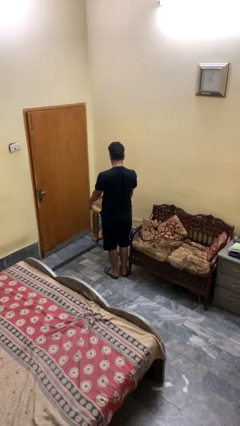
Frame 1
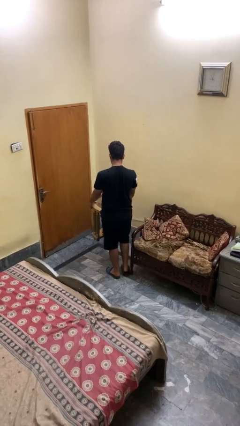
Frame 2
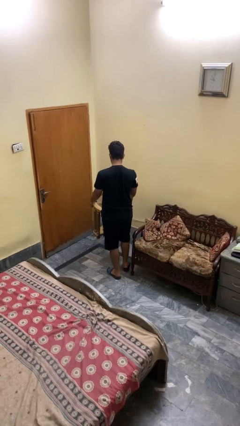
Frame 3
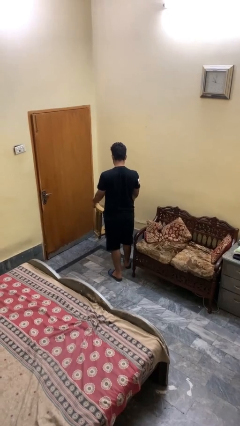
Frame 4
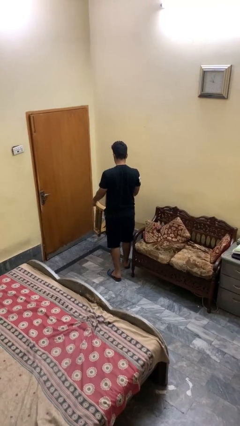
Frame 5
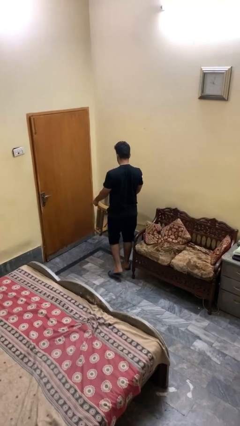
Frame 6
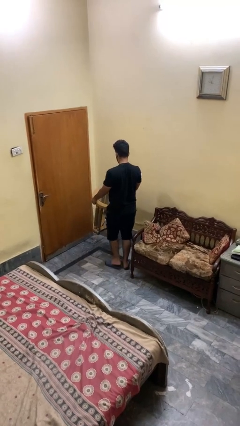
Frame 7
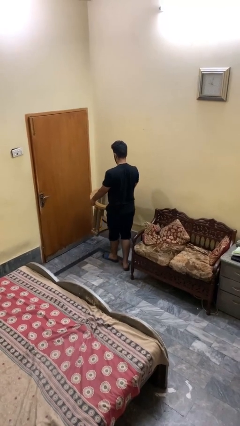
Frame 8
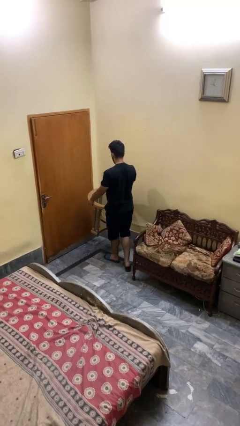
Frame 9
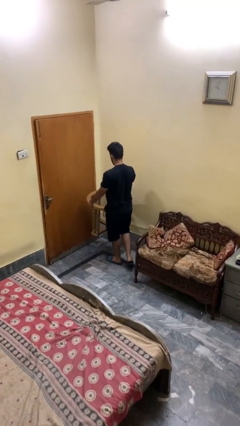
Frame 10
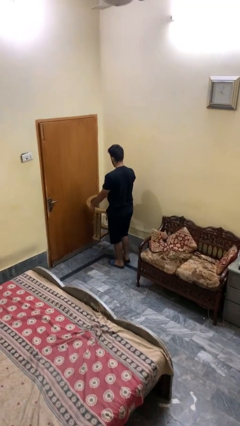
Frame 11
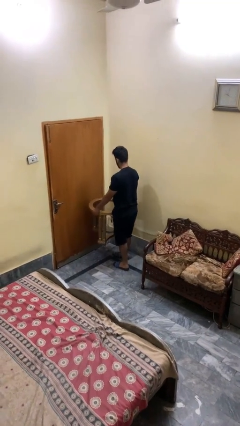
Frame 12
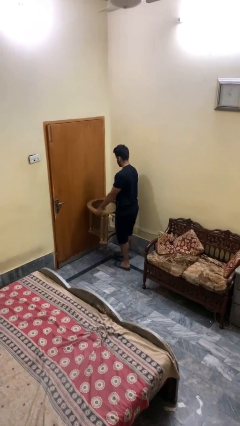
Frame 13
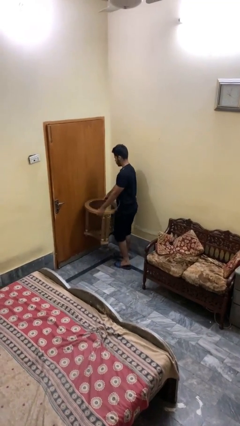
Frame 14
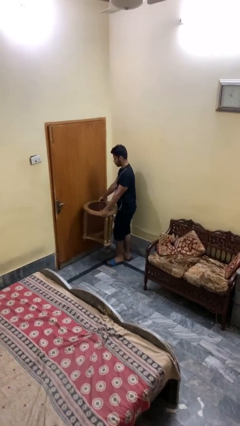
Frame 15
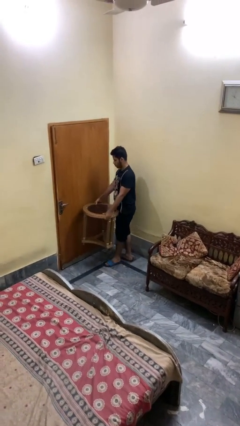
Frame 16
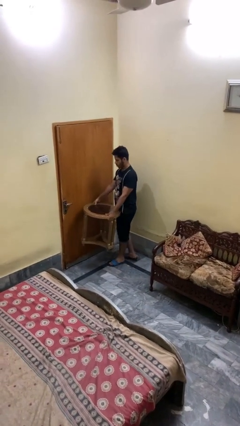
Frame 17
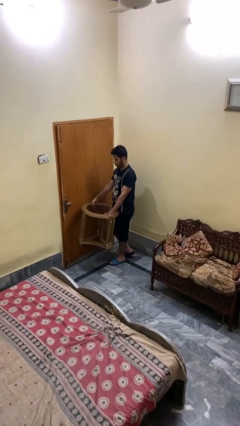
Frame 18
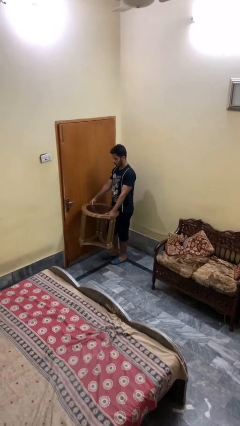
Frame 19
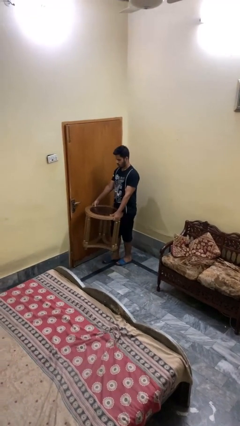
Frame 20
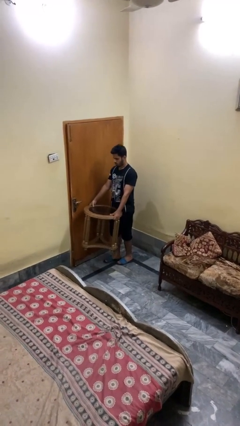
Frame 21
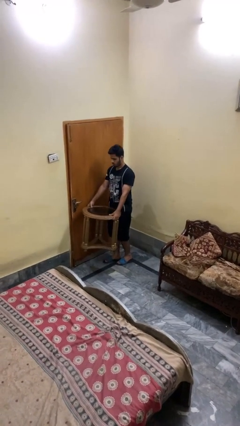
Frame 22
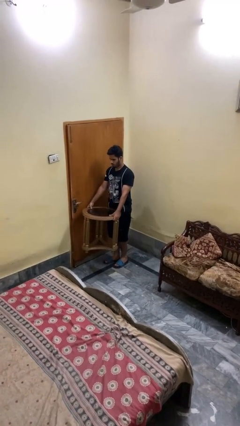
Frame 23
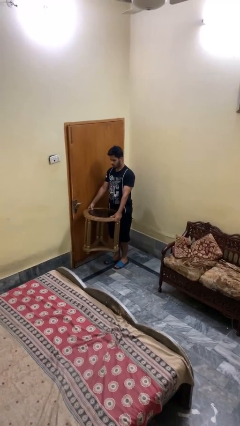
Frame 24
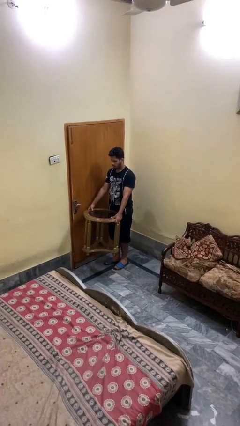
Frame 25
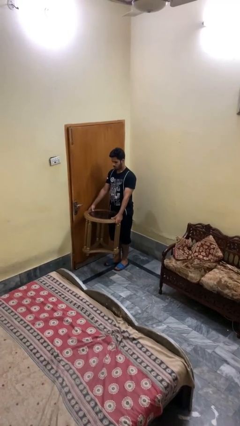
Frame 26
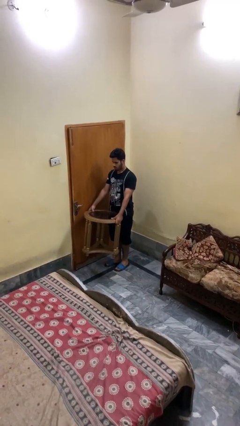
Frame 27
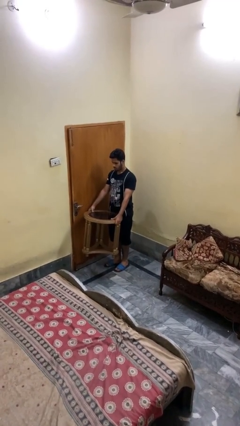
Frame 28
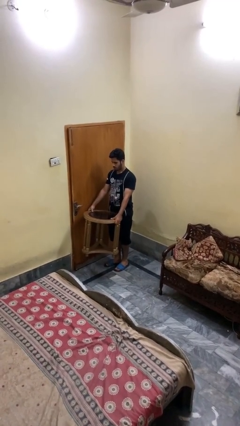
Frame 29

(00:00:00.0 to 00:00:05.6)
person carries furniture

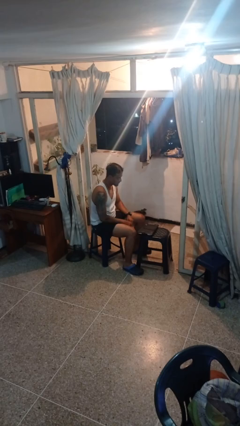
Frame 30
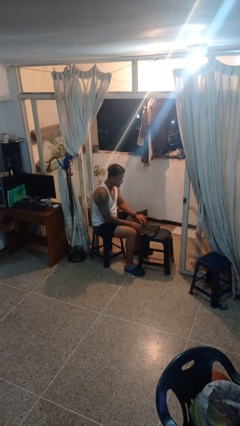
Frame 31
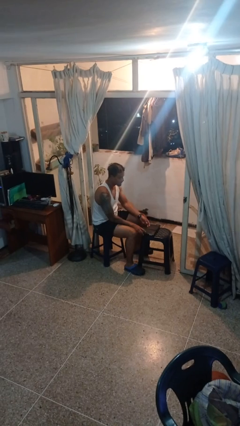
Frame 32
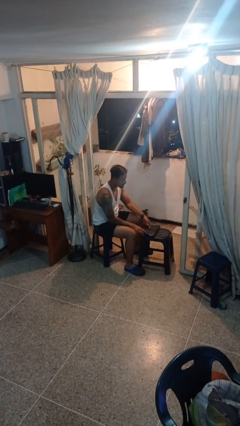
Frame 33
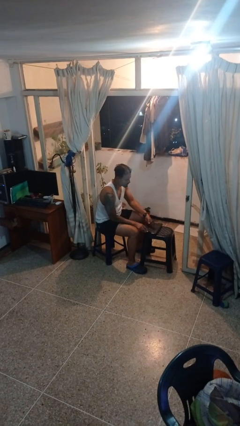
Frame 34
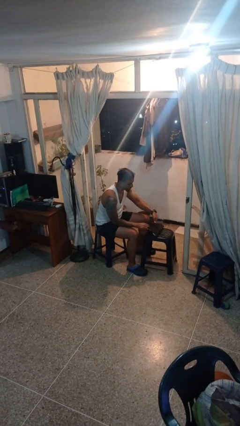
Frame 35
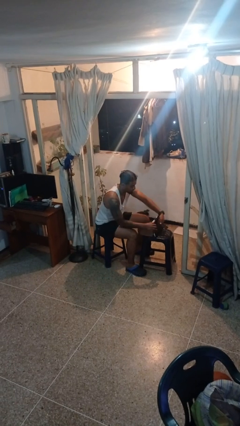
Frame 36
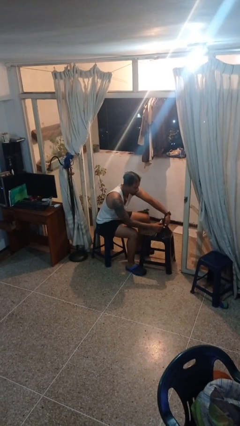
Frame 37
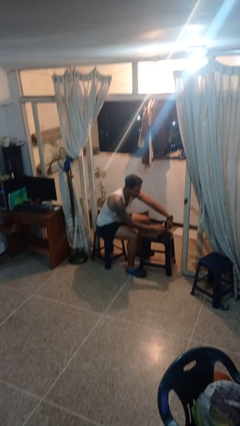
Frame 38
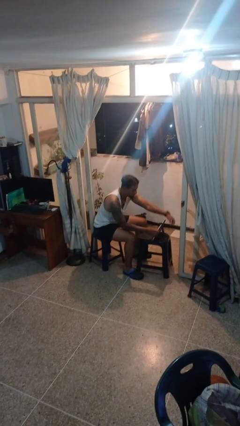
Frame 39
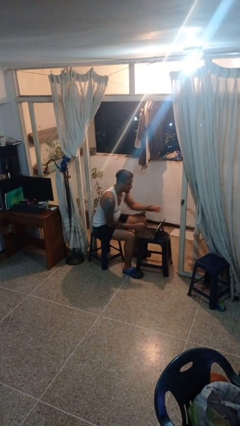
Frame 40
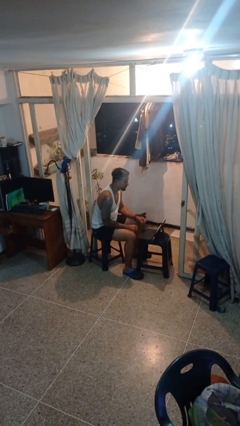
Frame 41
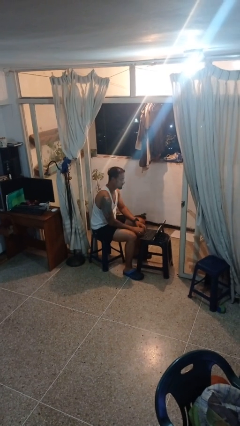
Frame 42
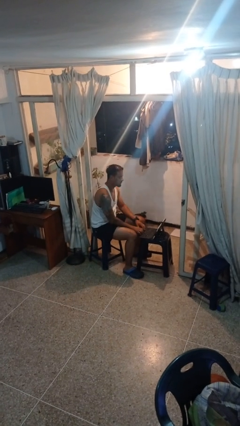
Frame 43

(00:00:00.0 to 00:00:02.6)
person opens laptop

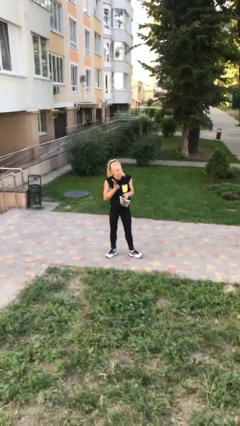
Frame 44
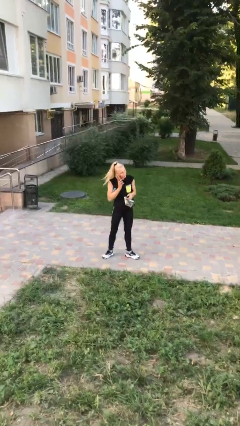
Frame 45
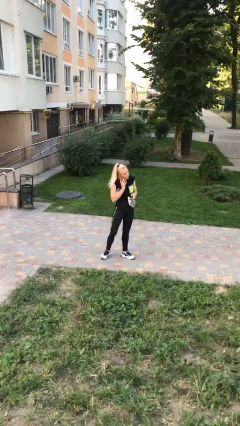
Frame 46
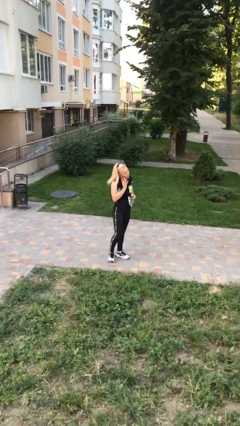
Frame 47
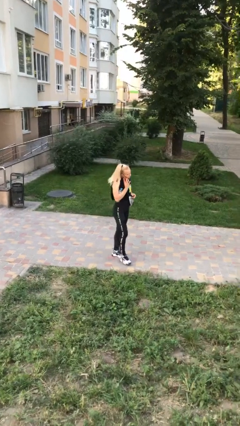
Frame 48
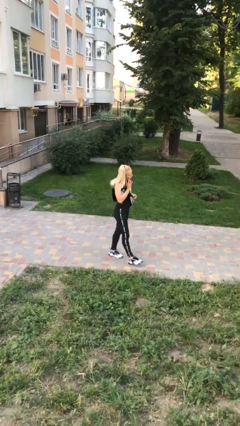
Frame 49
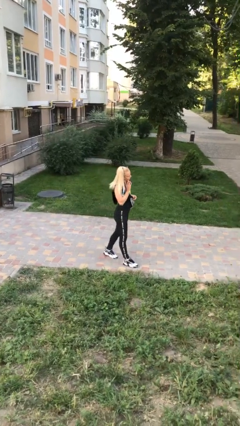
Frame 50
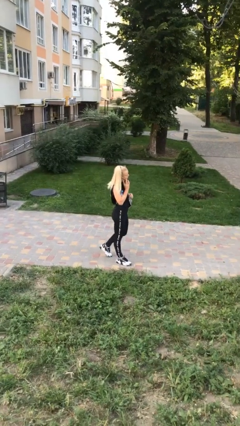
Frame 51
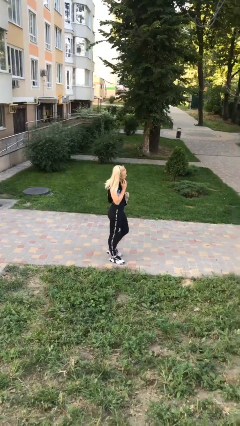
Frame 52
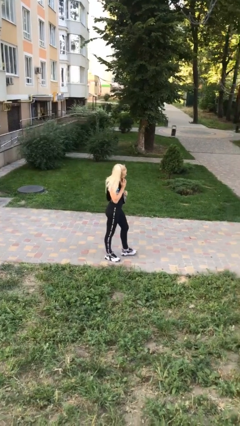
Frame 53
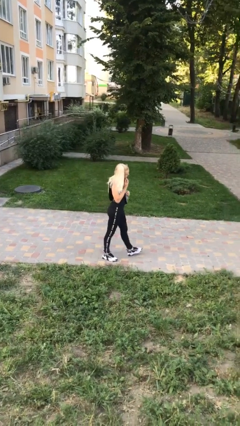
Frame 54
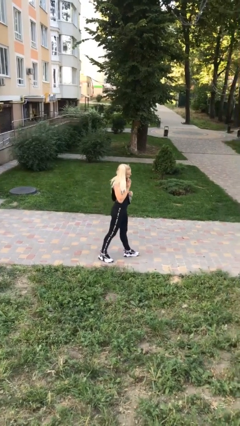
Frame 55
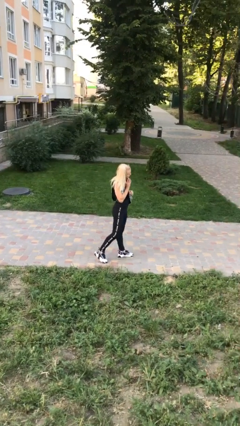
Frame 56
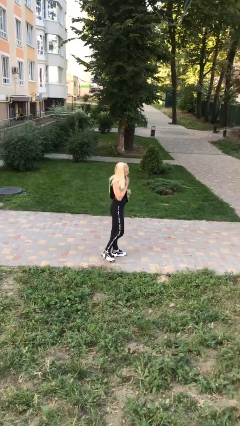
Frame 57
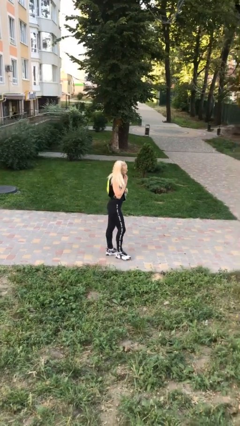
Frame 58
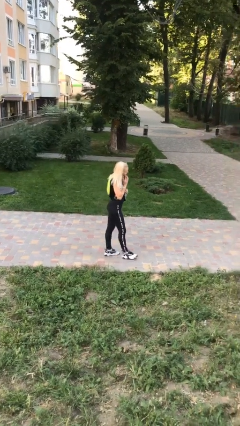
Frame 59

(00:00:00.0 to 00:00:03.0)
person talks on phone

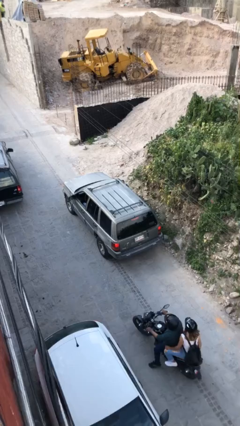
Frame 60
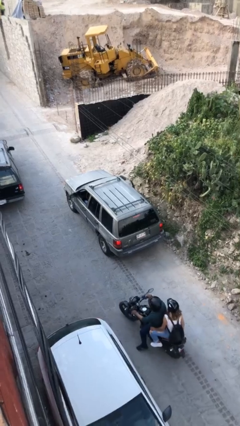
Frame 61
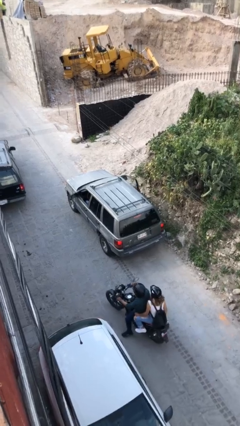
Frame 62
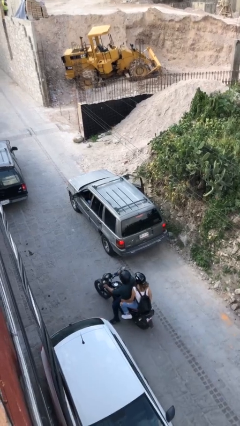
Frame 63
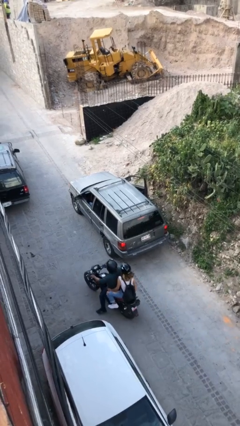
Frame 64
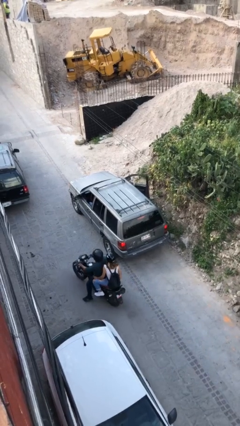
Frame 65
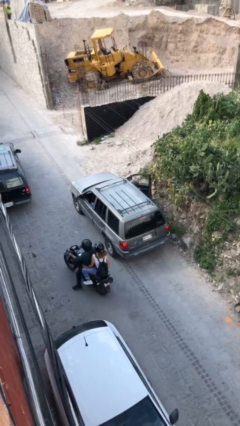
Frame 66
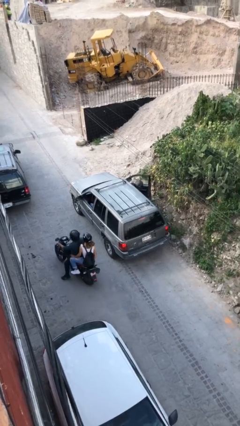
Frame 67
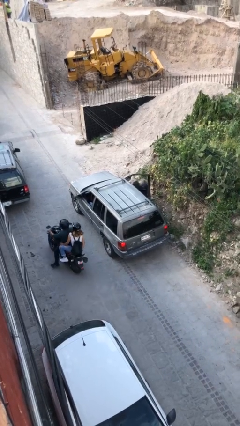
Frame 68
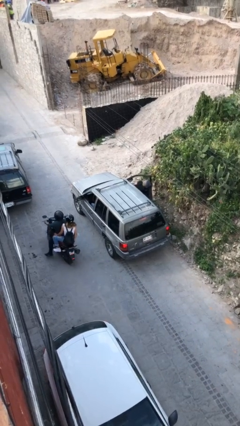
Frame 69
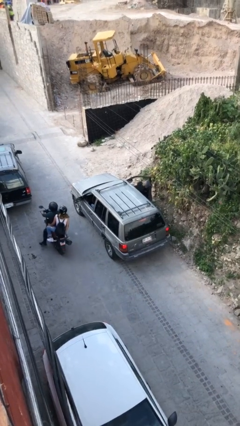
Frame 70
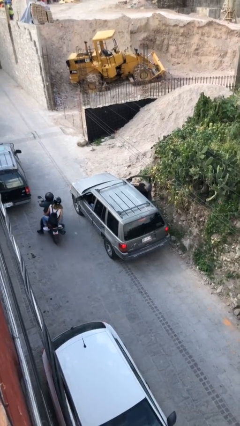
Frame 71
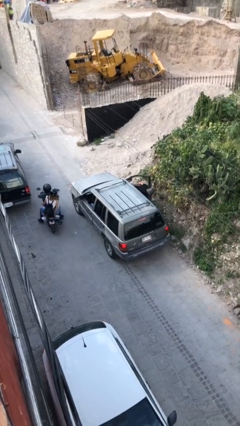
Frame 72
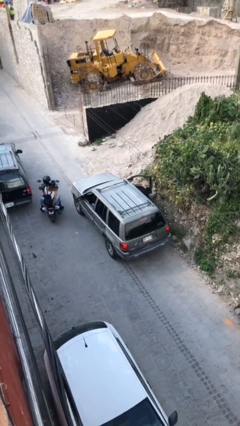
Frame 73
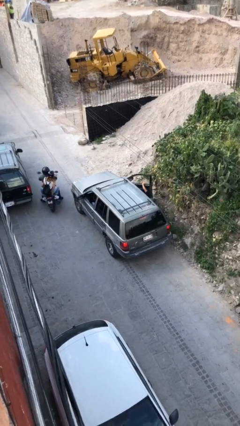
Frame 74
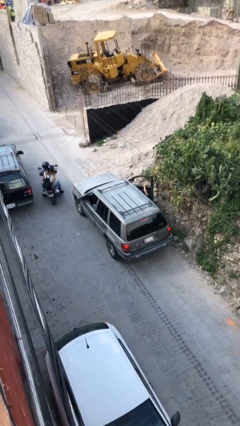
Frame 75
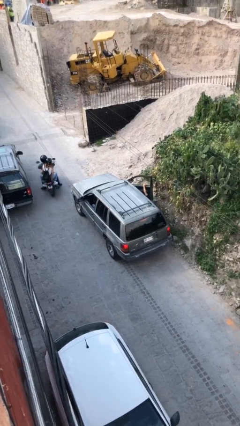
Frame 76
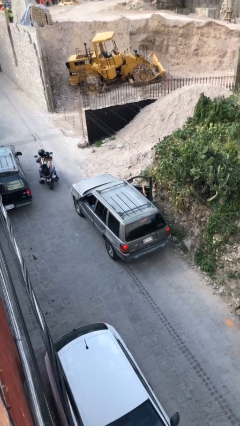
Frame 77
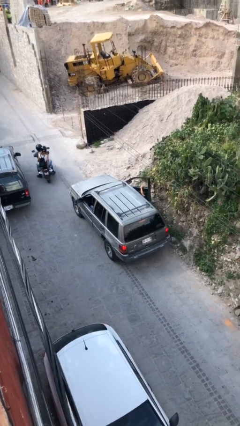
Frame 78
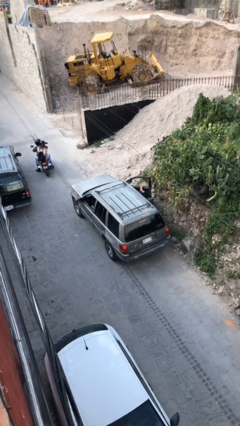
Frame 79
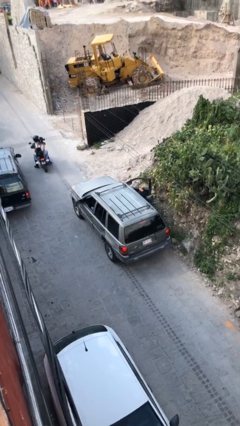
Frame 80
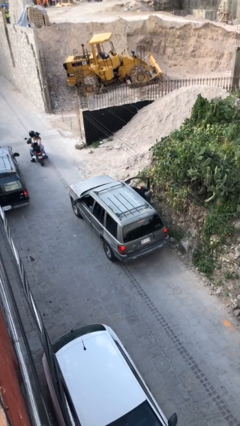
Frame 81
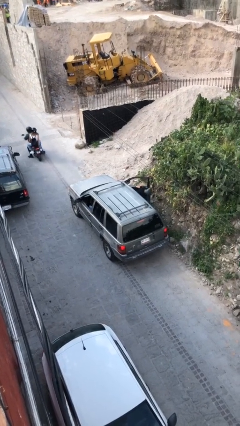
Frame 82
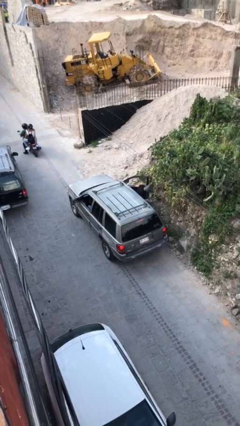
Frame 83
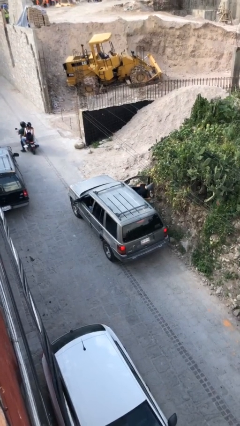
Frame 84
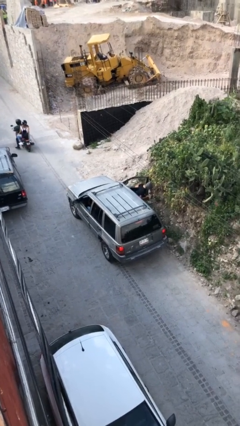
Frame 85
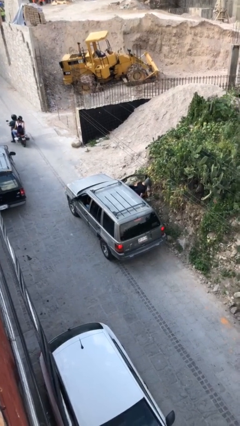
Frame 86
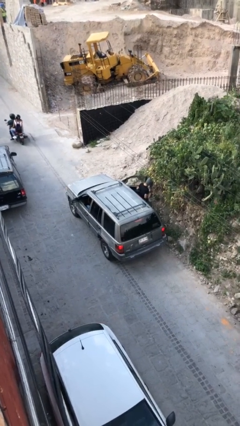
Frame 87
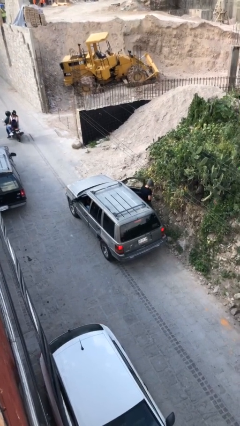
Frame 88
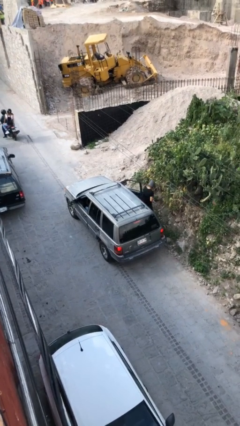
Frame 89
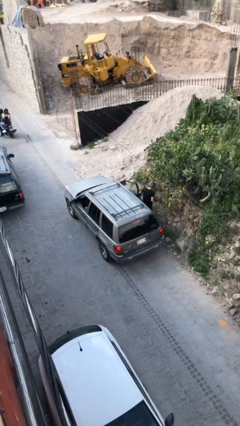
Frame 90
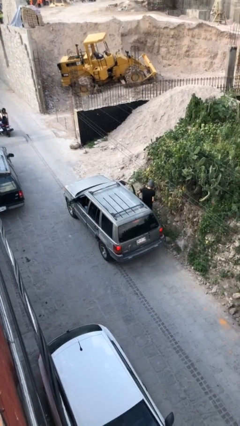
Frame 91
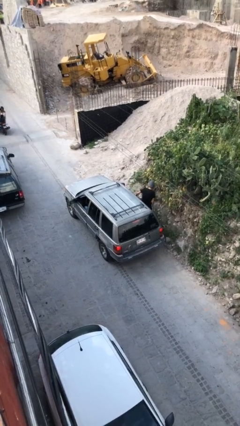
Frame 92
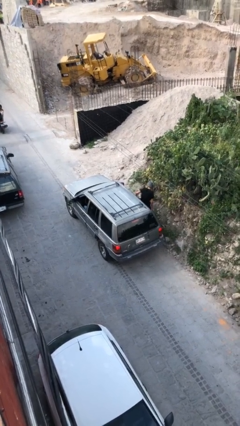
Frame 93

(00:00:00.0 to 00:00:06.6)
car drops off person
